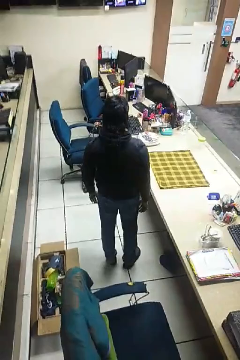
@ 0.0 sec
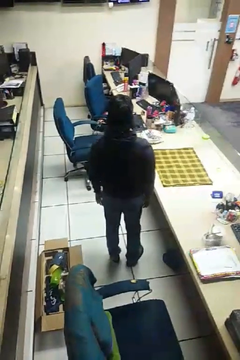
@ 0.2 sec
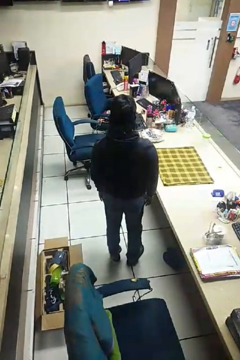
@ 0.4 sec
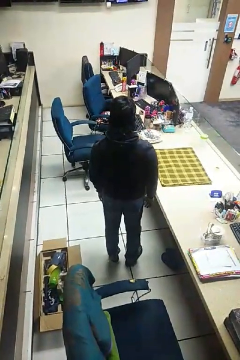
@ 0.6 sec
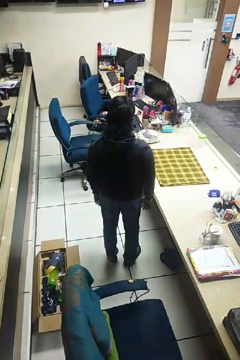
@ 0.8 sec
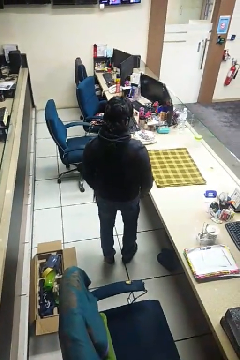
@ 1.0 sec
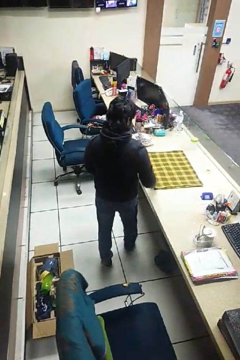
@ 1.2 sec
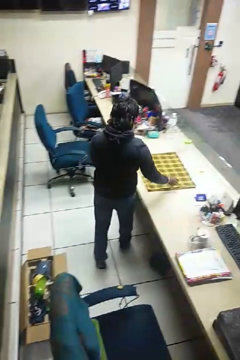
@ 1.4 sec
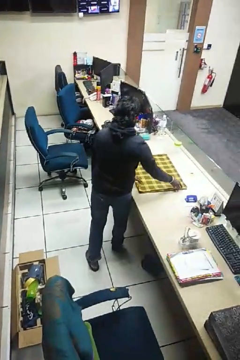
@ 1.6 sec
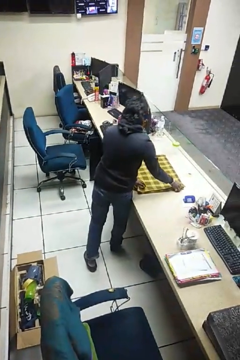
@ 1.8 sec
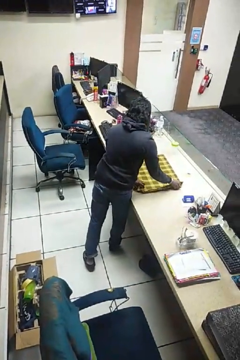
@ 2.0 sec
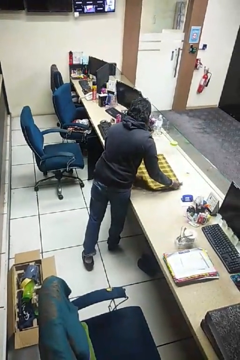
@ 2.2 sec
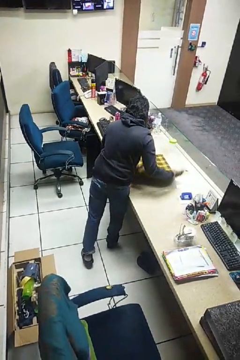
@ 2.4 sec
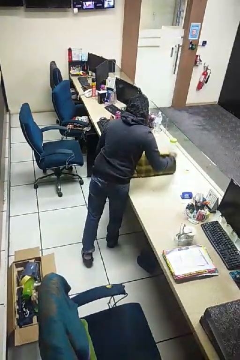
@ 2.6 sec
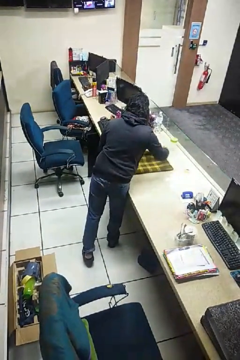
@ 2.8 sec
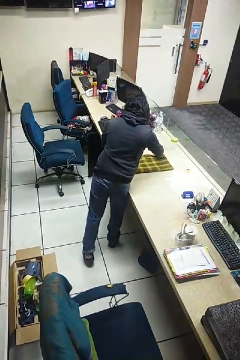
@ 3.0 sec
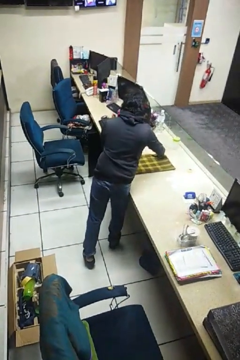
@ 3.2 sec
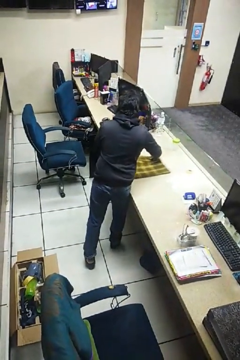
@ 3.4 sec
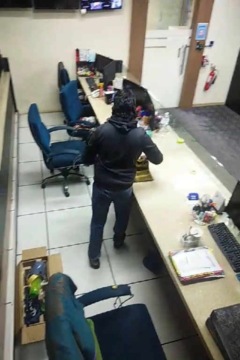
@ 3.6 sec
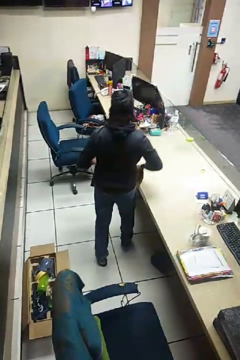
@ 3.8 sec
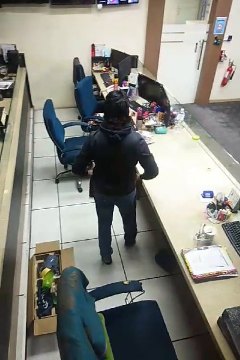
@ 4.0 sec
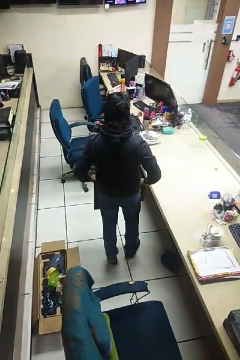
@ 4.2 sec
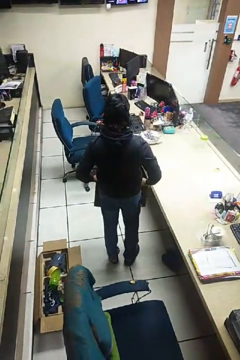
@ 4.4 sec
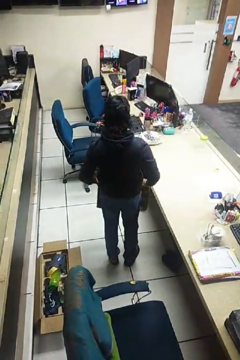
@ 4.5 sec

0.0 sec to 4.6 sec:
person folds tablecloth

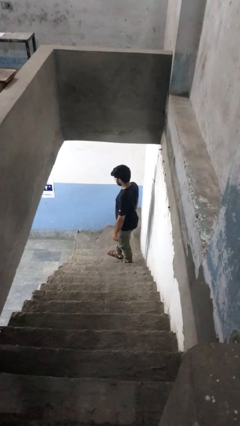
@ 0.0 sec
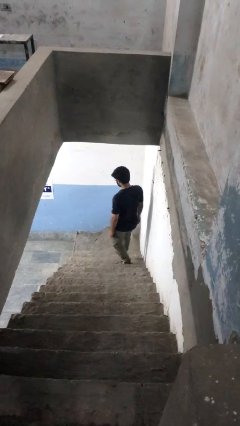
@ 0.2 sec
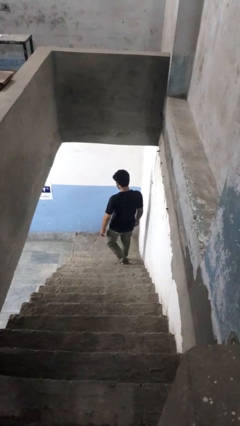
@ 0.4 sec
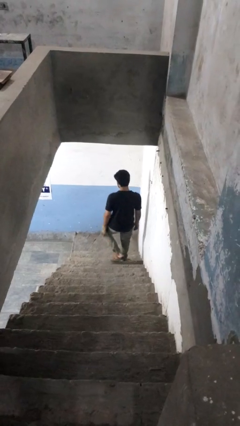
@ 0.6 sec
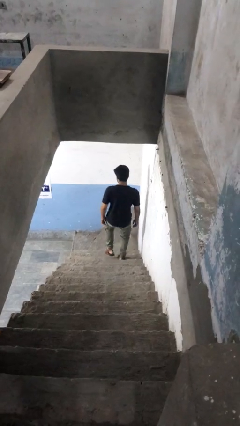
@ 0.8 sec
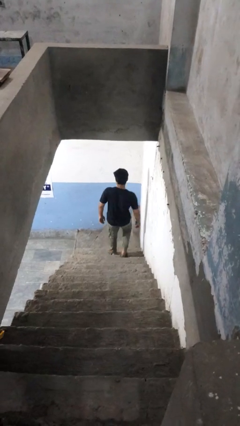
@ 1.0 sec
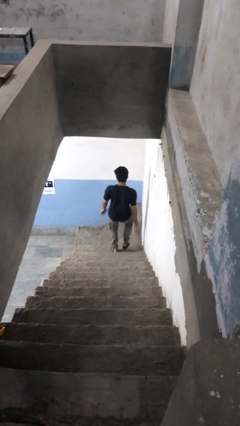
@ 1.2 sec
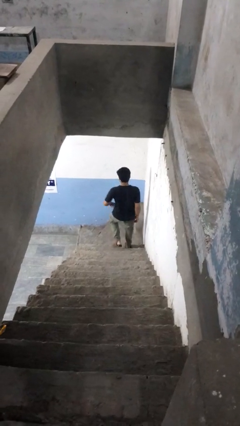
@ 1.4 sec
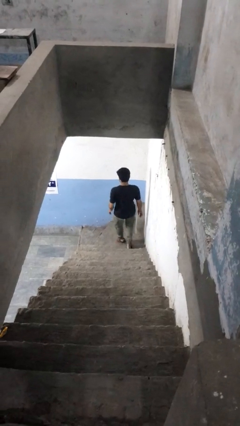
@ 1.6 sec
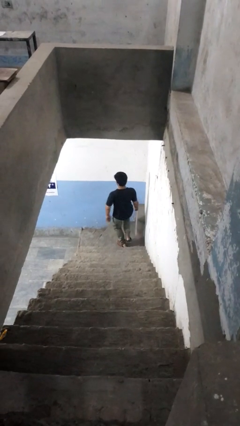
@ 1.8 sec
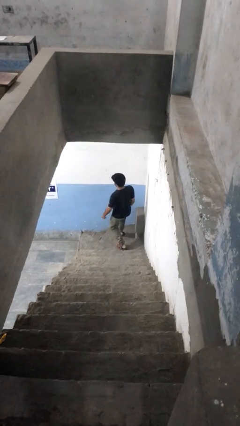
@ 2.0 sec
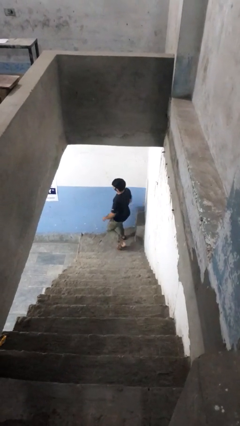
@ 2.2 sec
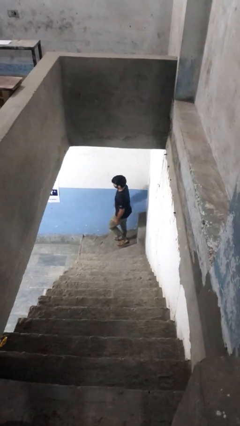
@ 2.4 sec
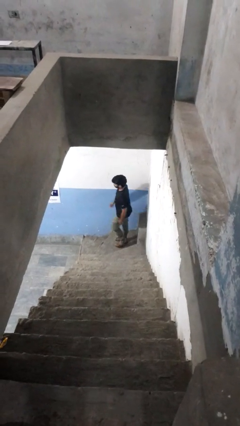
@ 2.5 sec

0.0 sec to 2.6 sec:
person climbs down stairs

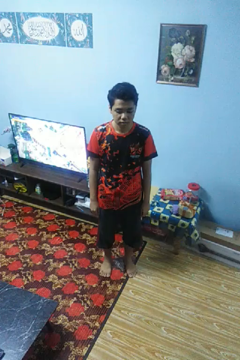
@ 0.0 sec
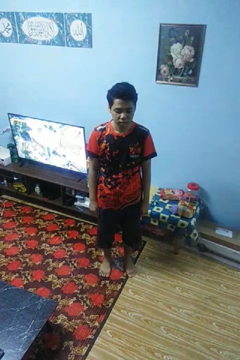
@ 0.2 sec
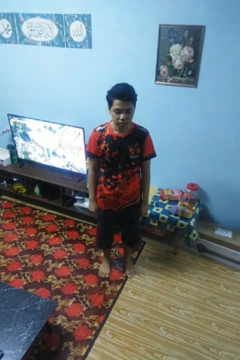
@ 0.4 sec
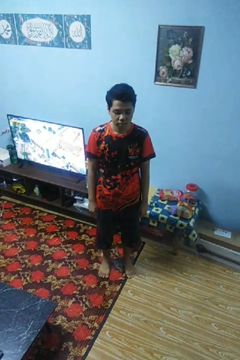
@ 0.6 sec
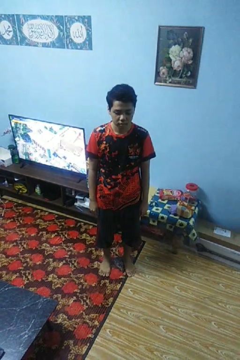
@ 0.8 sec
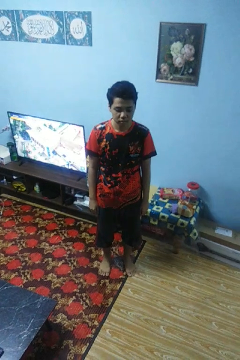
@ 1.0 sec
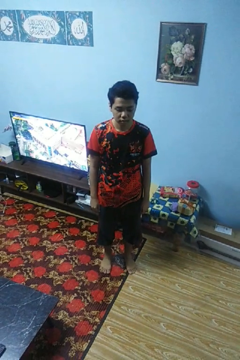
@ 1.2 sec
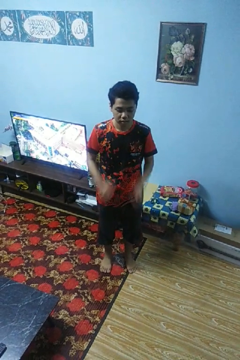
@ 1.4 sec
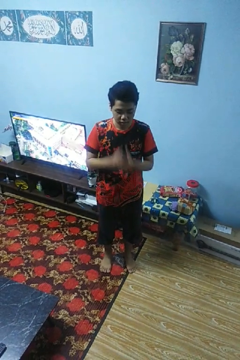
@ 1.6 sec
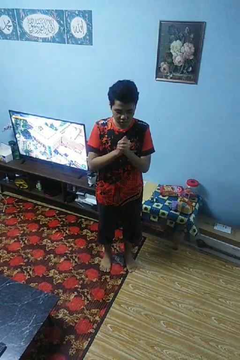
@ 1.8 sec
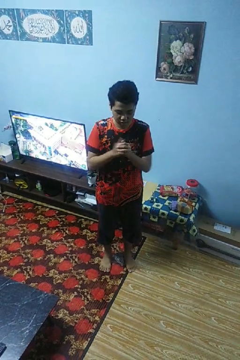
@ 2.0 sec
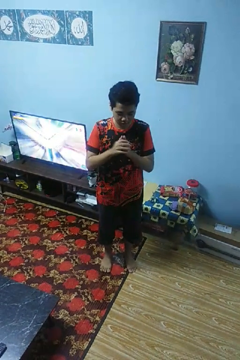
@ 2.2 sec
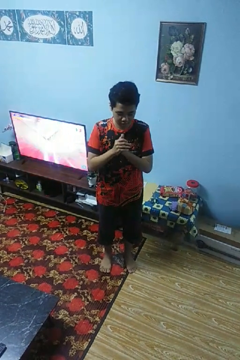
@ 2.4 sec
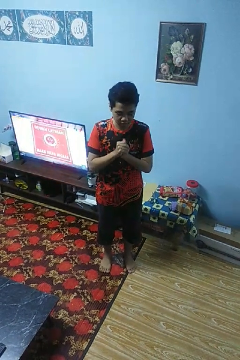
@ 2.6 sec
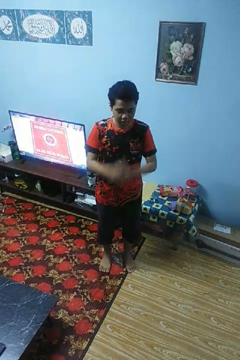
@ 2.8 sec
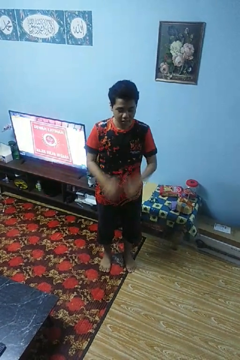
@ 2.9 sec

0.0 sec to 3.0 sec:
person cracks knuckles

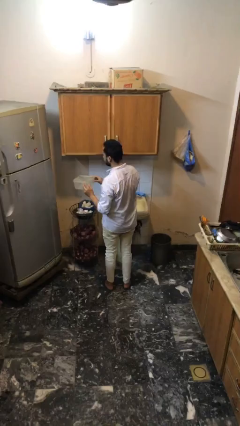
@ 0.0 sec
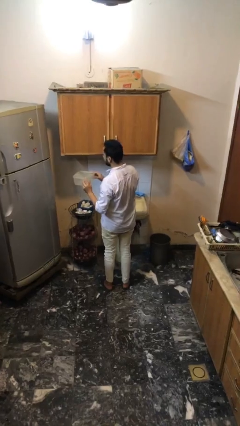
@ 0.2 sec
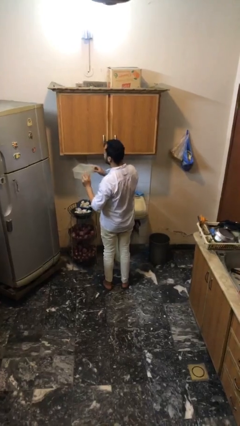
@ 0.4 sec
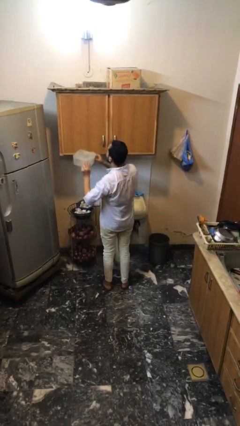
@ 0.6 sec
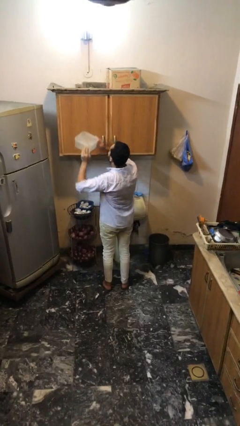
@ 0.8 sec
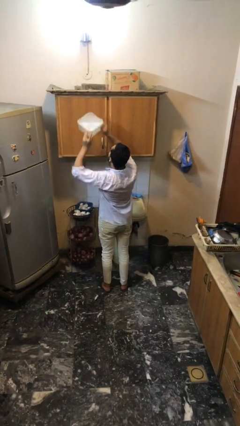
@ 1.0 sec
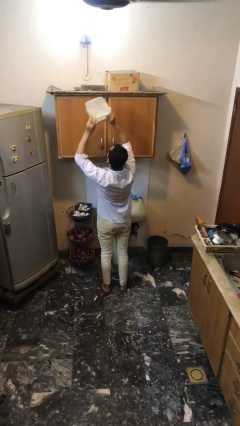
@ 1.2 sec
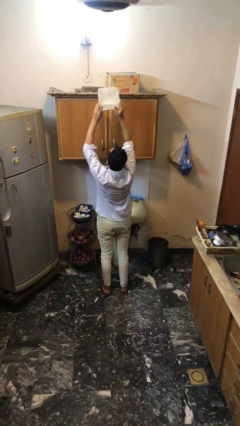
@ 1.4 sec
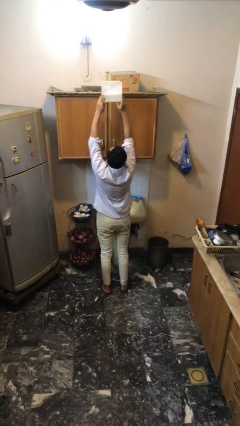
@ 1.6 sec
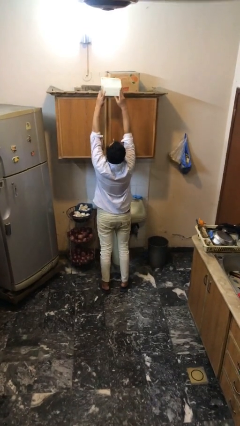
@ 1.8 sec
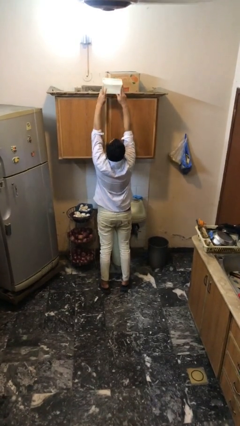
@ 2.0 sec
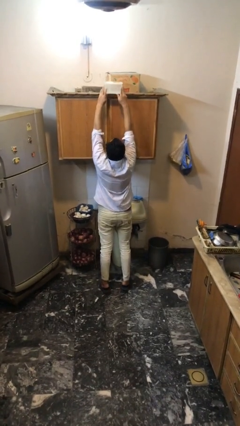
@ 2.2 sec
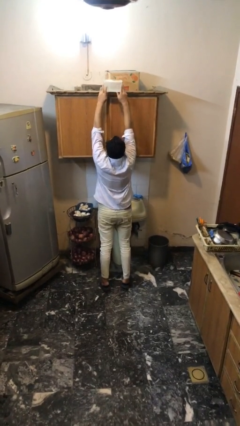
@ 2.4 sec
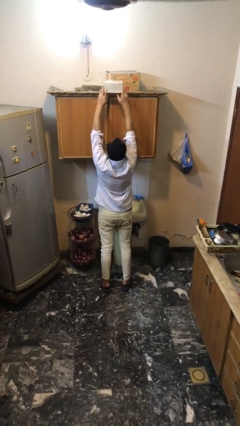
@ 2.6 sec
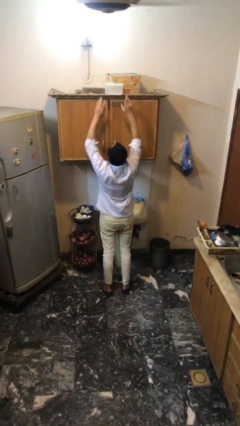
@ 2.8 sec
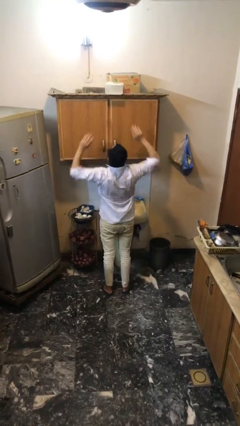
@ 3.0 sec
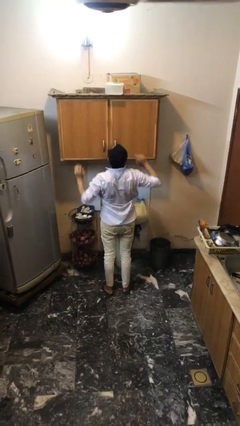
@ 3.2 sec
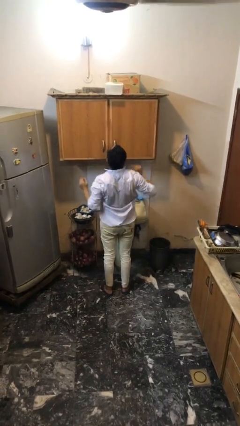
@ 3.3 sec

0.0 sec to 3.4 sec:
person puts down object on shelf

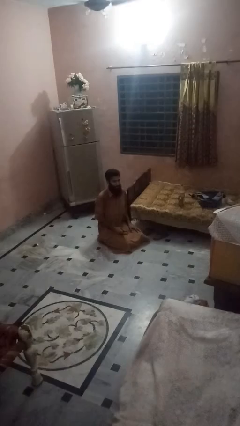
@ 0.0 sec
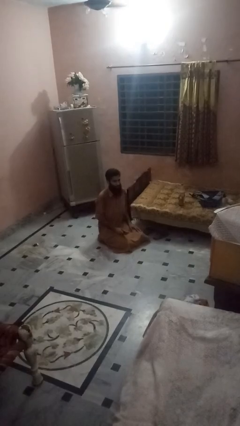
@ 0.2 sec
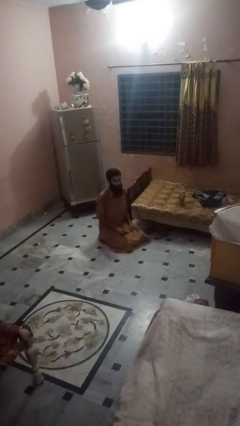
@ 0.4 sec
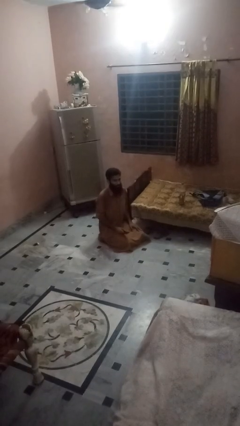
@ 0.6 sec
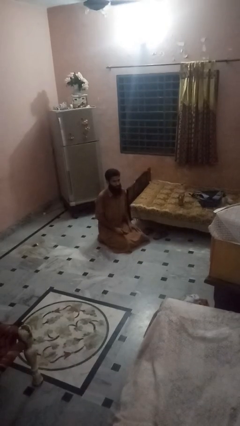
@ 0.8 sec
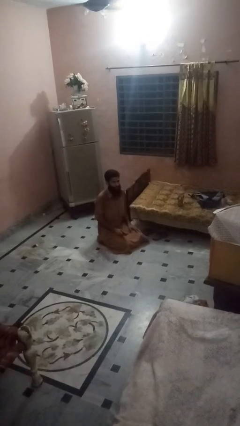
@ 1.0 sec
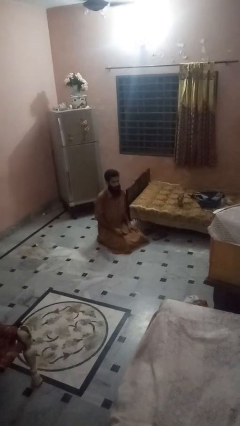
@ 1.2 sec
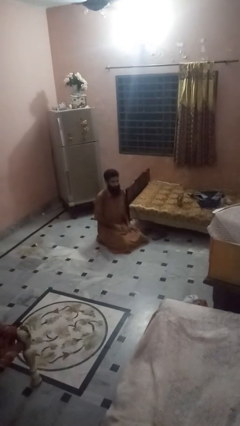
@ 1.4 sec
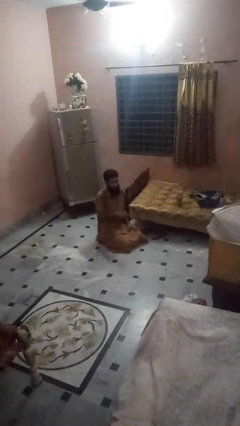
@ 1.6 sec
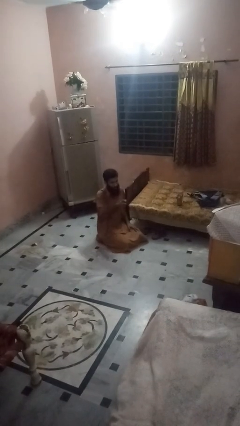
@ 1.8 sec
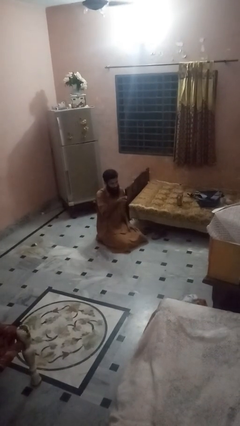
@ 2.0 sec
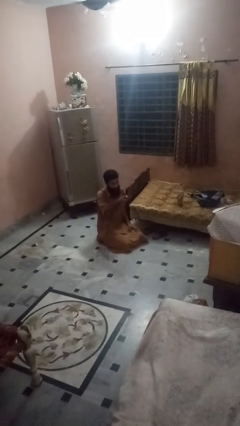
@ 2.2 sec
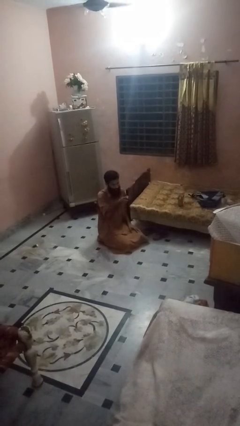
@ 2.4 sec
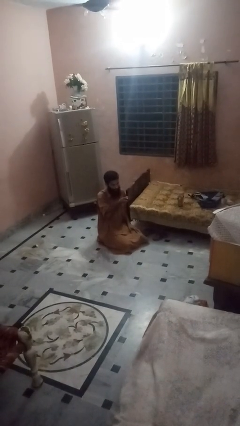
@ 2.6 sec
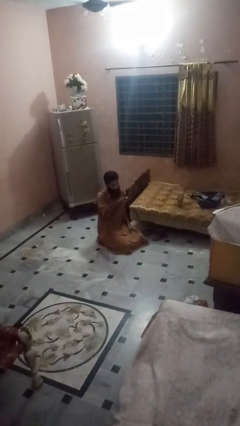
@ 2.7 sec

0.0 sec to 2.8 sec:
person uses television remote

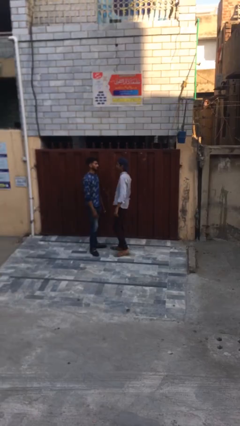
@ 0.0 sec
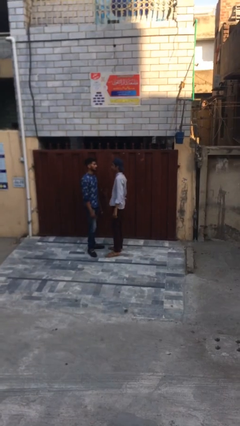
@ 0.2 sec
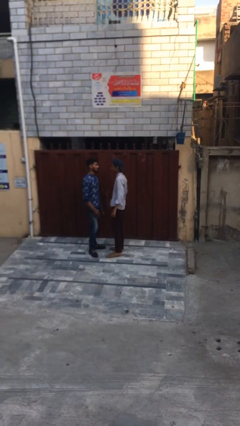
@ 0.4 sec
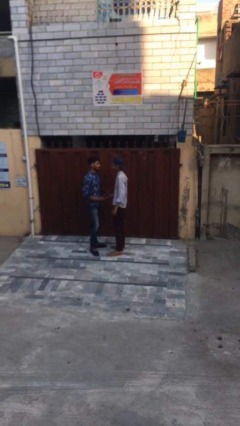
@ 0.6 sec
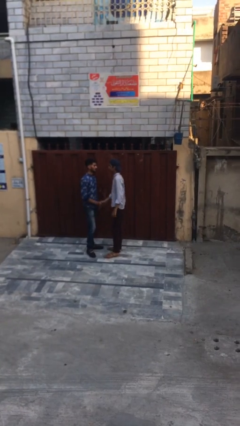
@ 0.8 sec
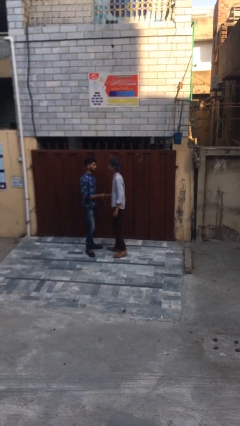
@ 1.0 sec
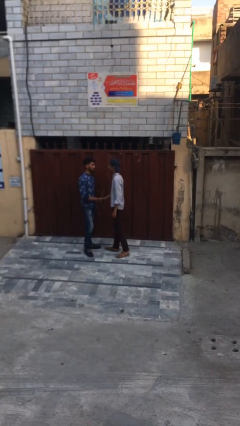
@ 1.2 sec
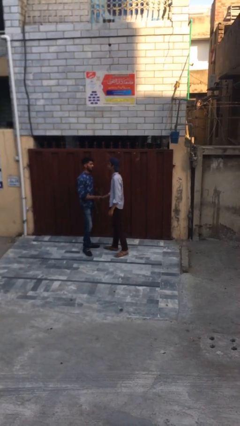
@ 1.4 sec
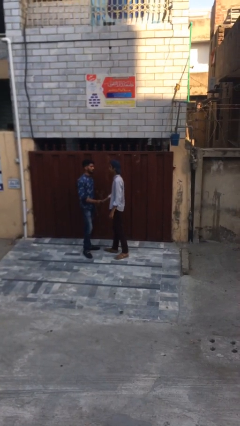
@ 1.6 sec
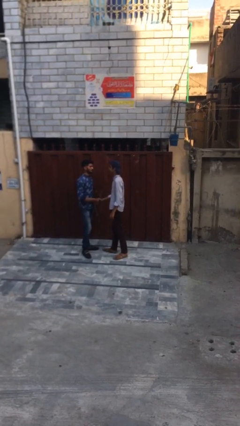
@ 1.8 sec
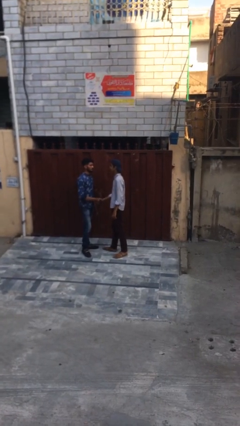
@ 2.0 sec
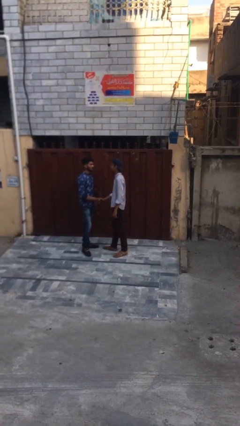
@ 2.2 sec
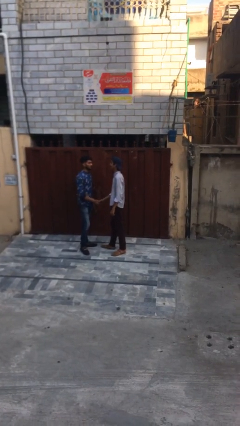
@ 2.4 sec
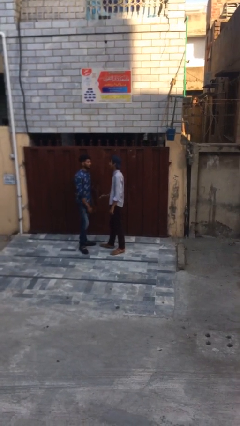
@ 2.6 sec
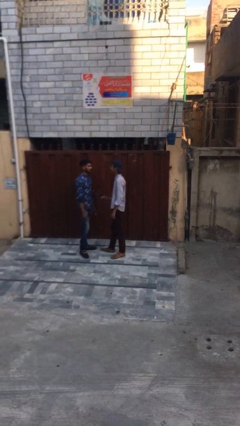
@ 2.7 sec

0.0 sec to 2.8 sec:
person shakes hand
